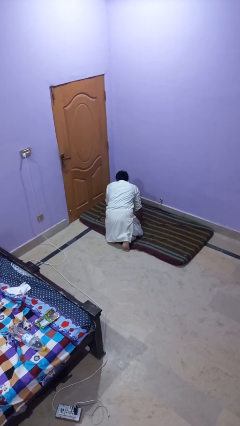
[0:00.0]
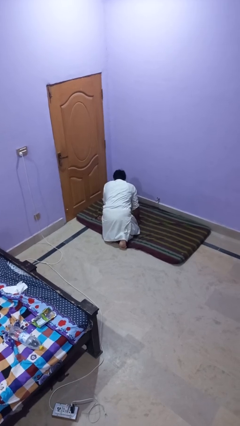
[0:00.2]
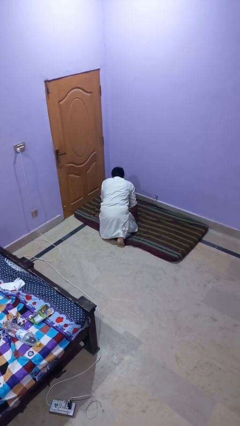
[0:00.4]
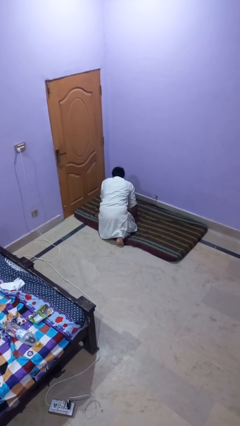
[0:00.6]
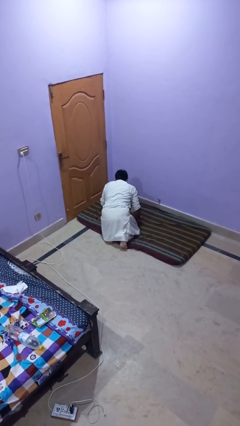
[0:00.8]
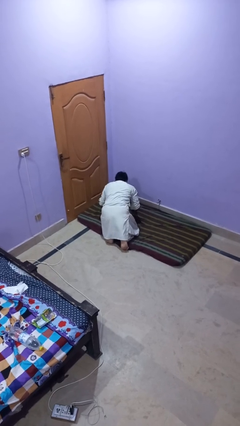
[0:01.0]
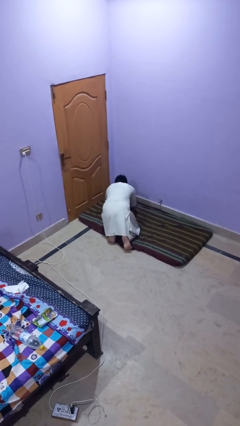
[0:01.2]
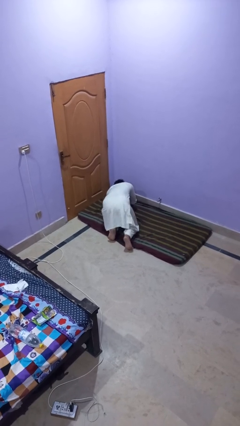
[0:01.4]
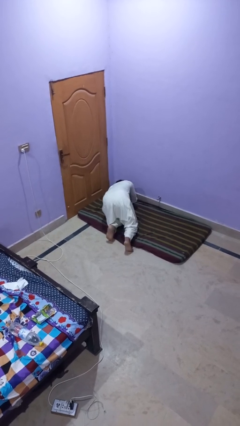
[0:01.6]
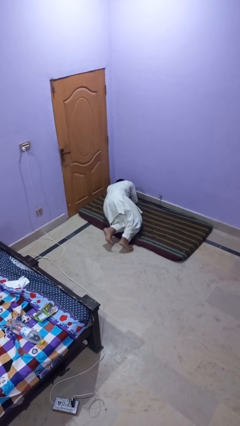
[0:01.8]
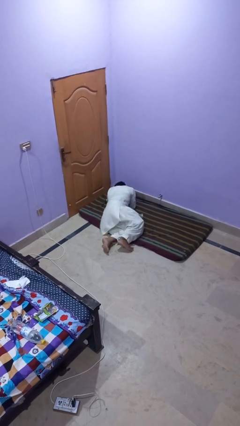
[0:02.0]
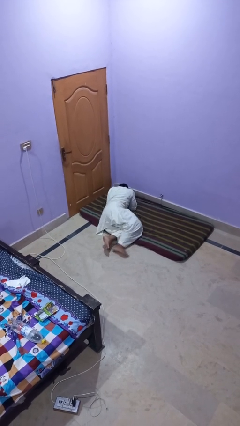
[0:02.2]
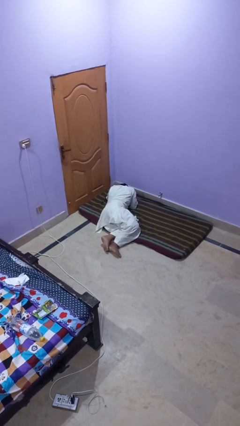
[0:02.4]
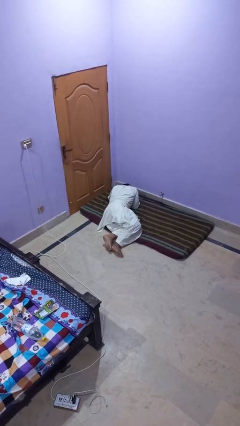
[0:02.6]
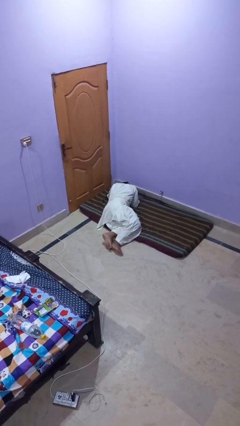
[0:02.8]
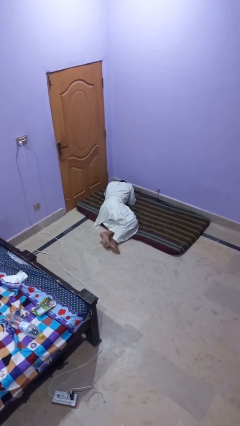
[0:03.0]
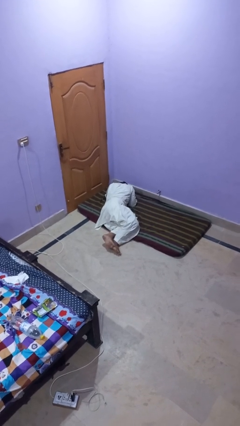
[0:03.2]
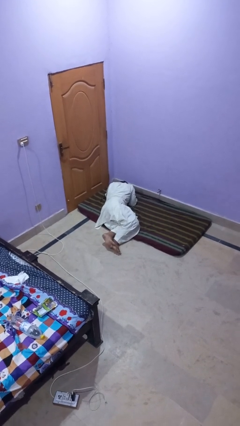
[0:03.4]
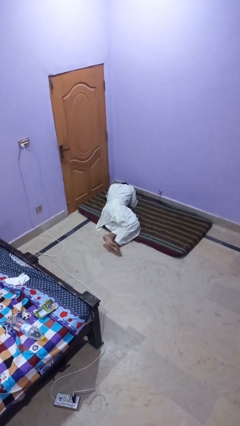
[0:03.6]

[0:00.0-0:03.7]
person lies down on floor

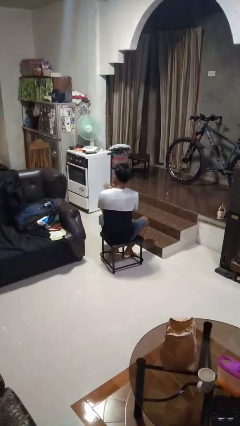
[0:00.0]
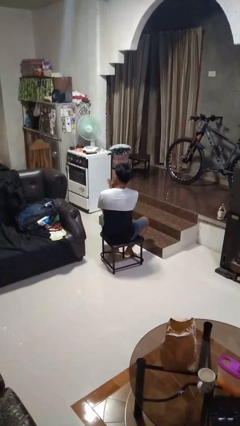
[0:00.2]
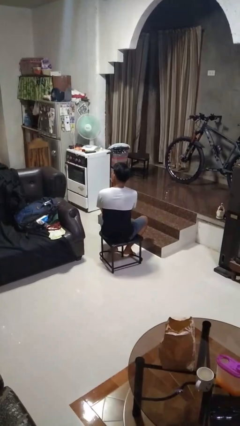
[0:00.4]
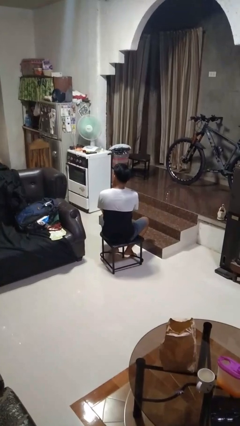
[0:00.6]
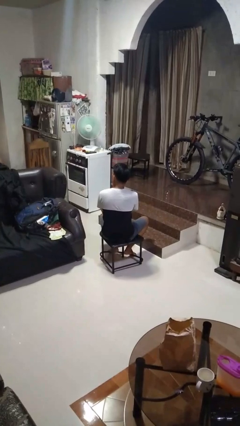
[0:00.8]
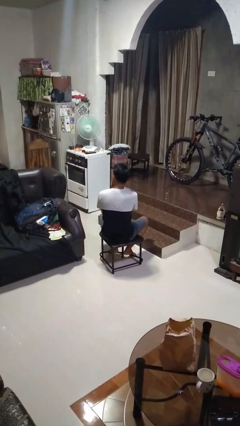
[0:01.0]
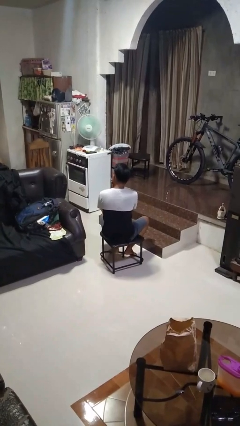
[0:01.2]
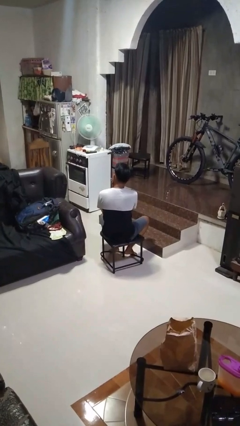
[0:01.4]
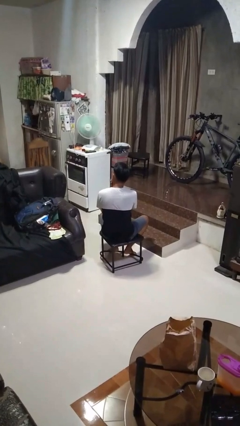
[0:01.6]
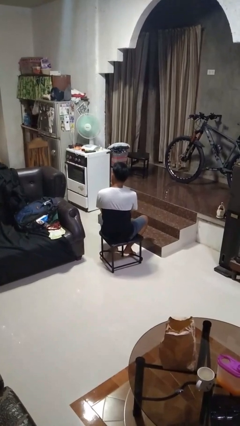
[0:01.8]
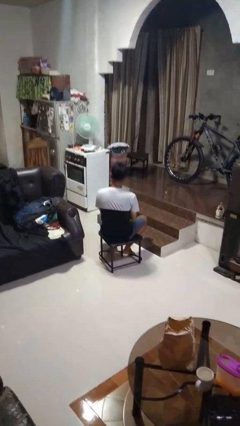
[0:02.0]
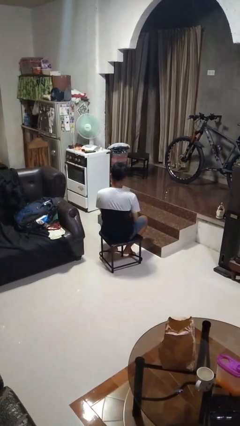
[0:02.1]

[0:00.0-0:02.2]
person strokes chin

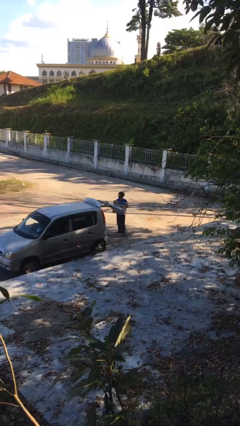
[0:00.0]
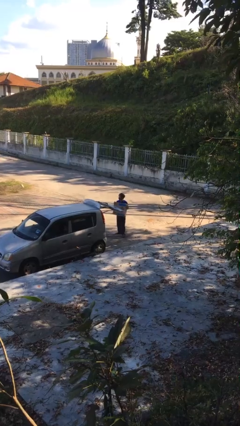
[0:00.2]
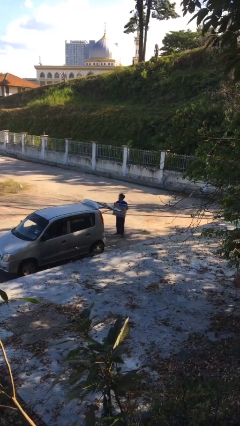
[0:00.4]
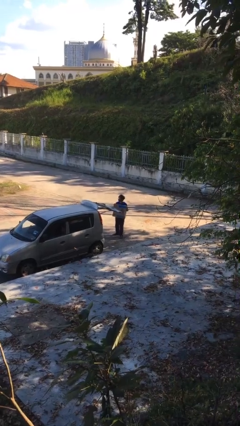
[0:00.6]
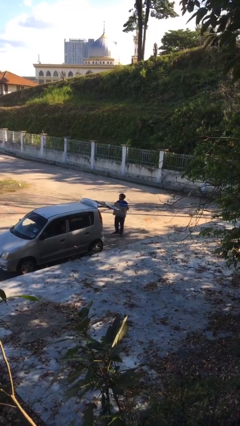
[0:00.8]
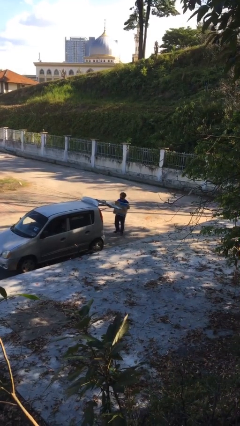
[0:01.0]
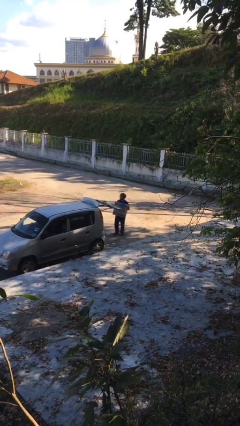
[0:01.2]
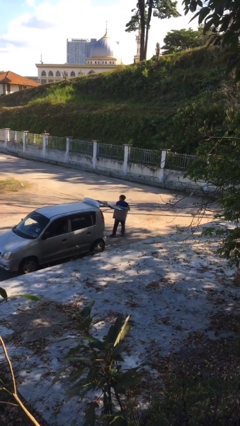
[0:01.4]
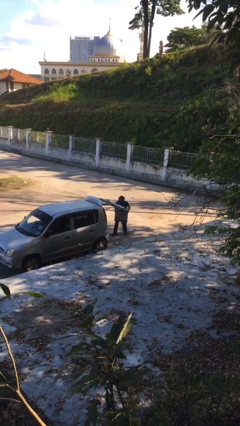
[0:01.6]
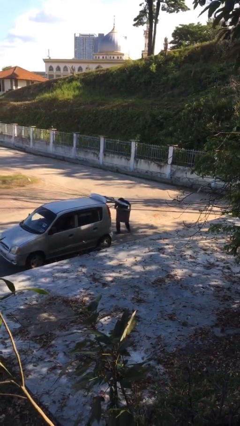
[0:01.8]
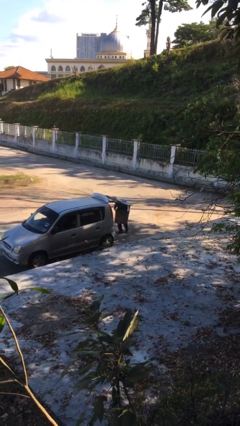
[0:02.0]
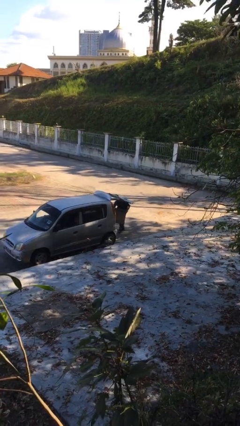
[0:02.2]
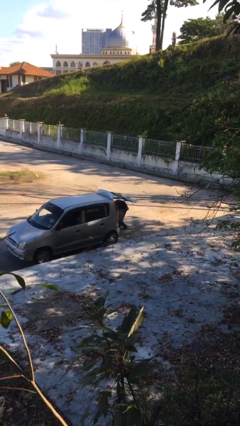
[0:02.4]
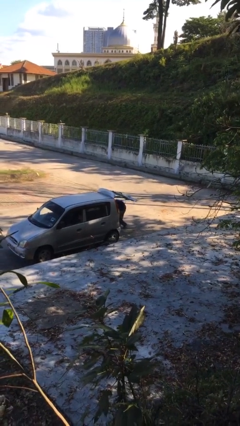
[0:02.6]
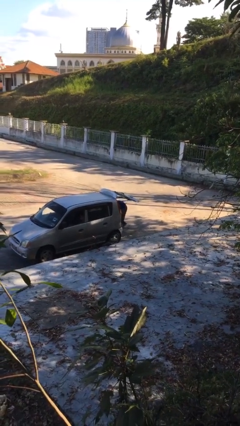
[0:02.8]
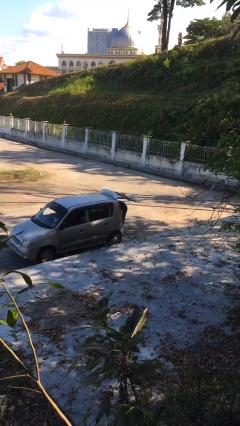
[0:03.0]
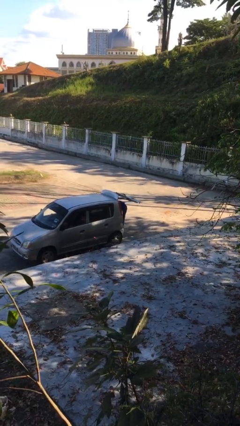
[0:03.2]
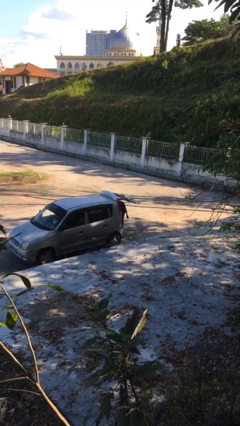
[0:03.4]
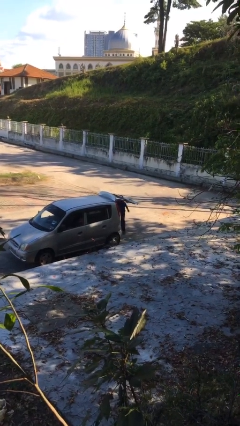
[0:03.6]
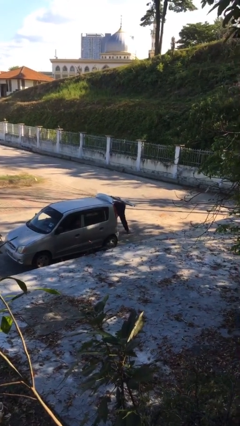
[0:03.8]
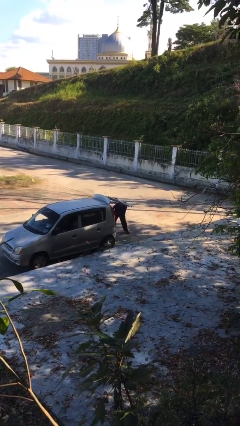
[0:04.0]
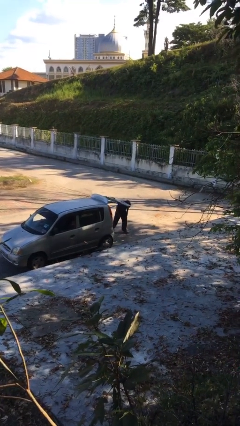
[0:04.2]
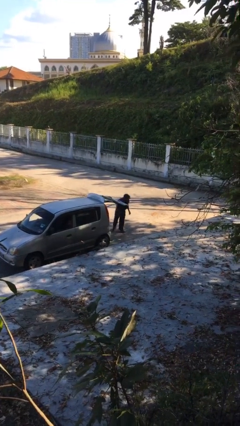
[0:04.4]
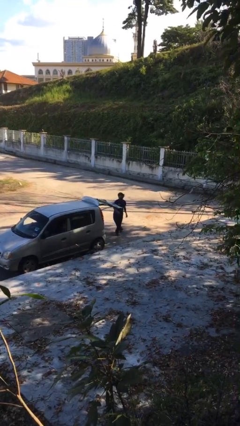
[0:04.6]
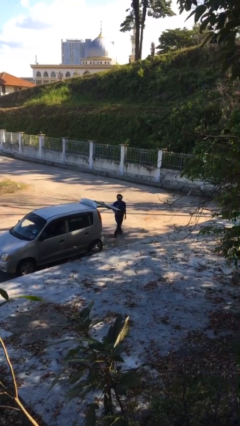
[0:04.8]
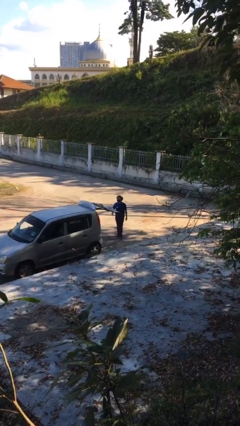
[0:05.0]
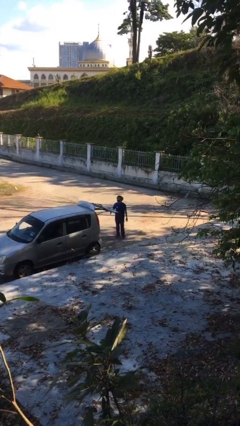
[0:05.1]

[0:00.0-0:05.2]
person loads car

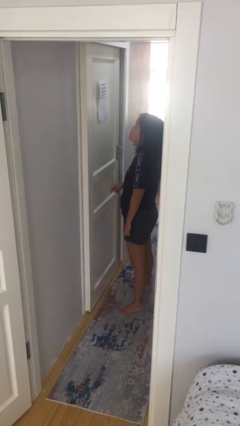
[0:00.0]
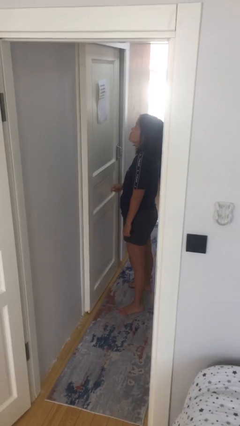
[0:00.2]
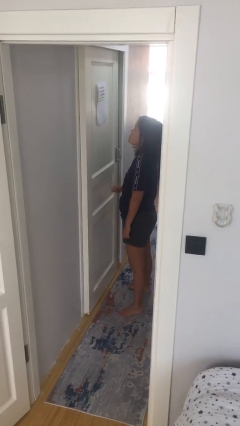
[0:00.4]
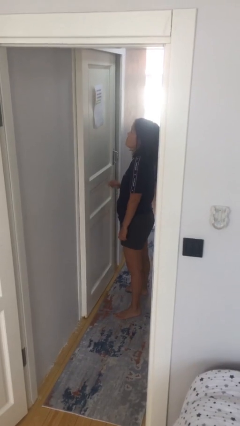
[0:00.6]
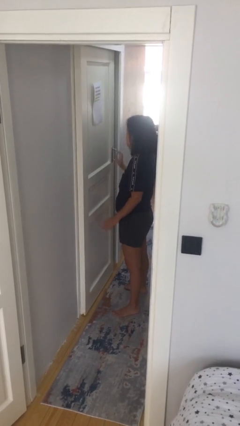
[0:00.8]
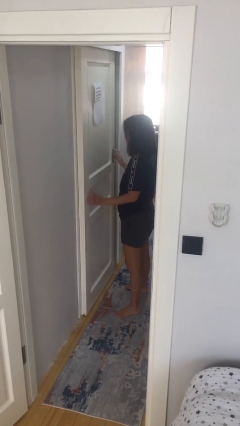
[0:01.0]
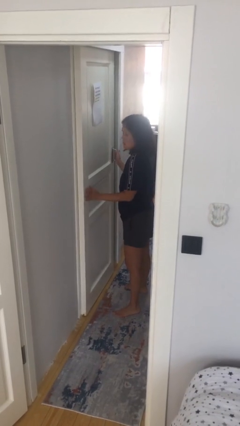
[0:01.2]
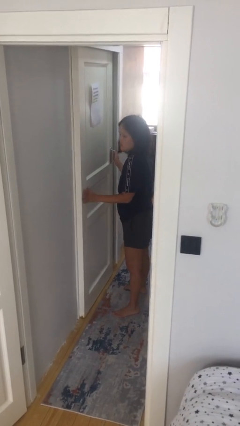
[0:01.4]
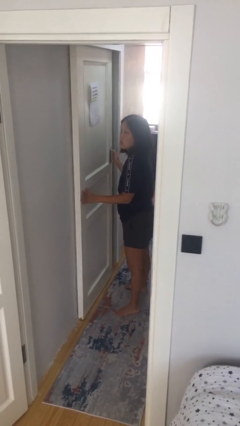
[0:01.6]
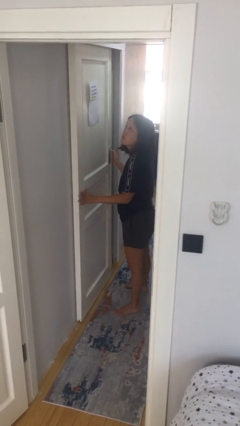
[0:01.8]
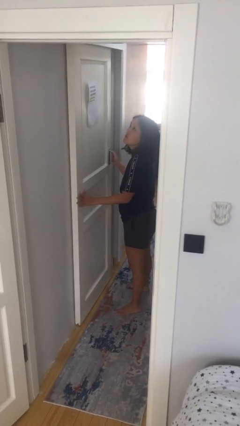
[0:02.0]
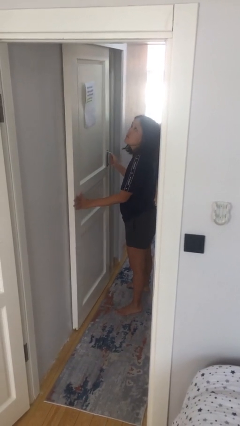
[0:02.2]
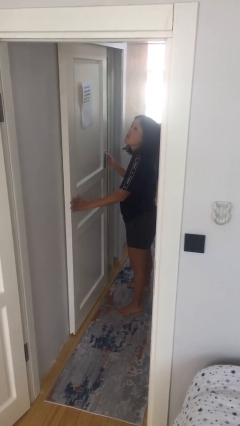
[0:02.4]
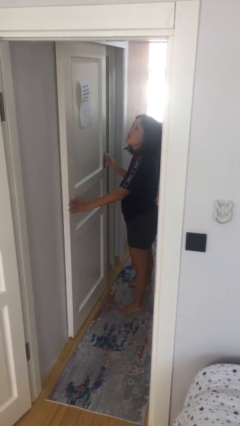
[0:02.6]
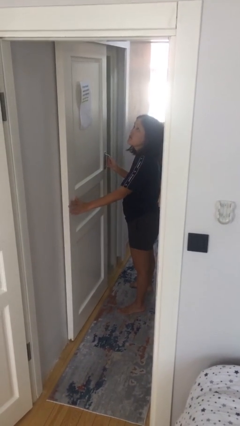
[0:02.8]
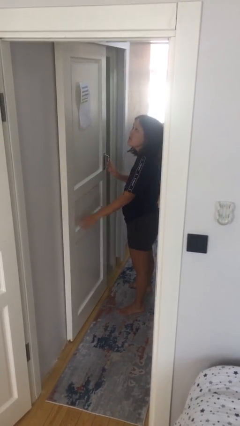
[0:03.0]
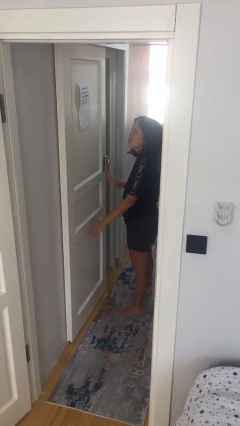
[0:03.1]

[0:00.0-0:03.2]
person opens sliding door

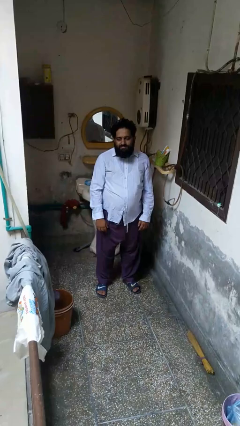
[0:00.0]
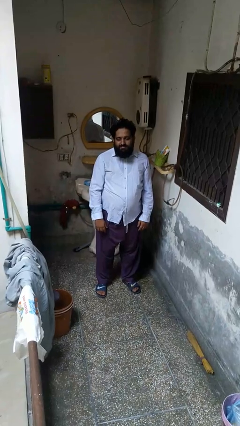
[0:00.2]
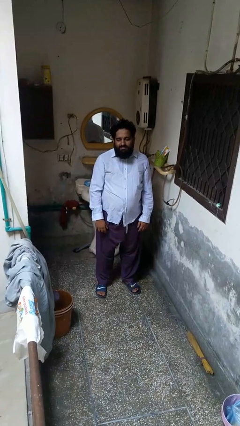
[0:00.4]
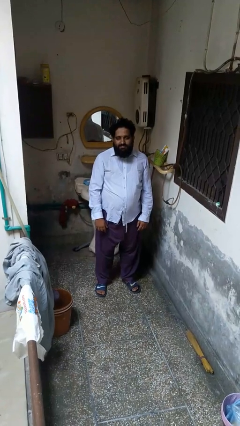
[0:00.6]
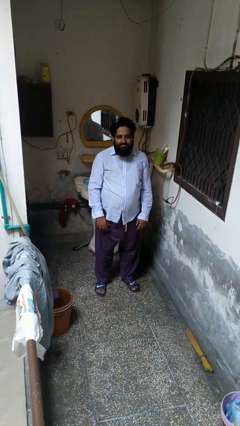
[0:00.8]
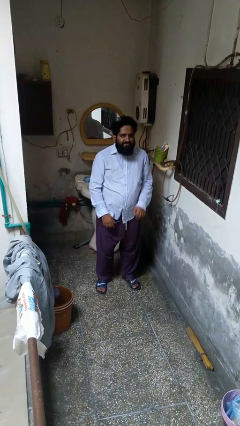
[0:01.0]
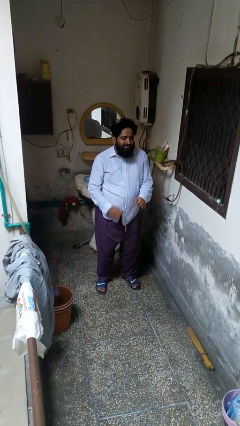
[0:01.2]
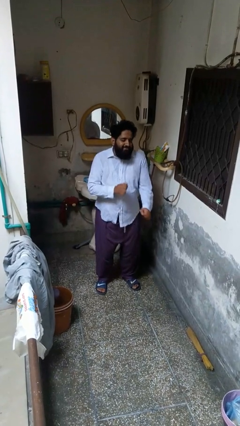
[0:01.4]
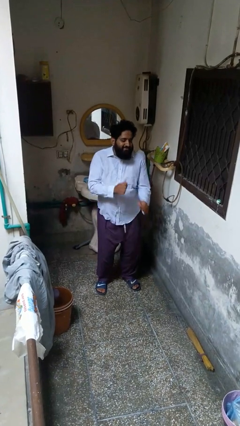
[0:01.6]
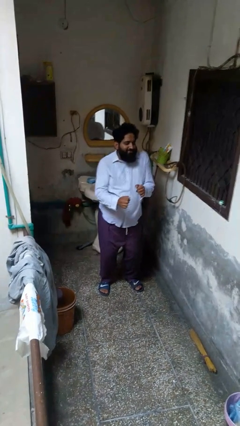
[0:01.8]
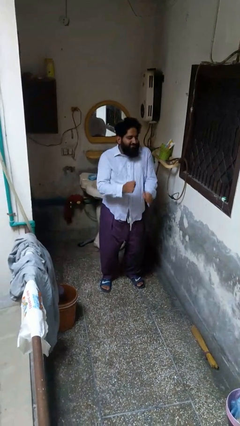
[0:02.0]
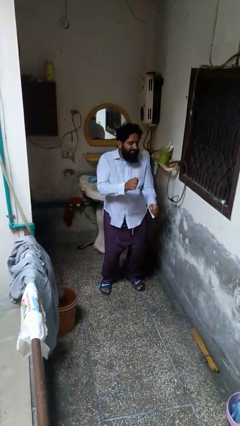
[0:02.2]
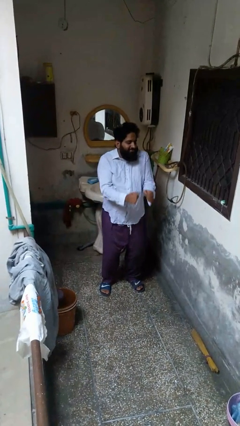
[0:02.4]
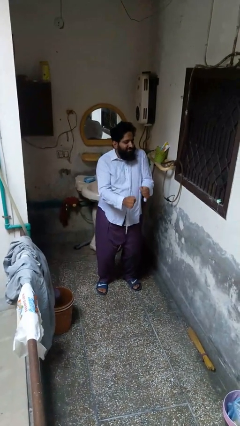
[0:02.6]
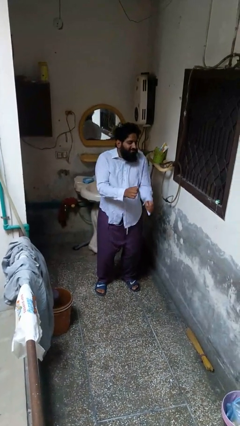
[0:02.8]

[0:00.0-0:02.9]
person dances in place

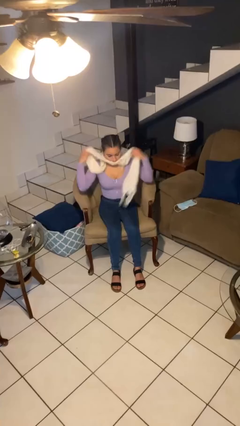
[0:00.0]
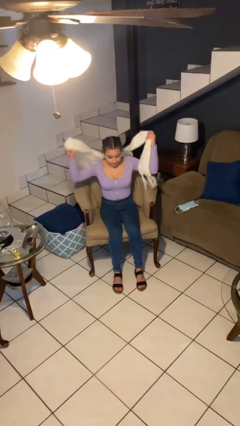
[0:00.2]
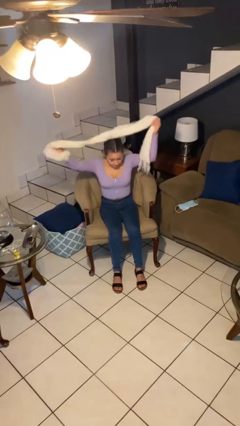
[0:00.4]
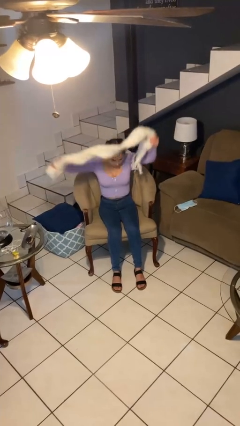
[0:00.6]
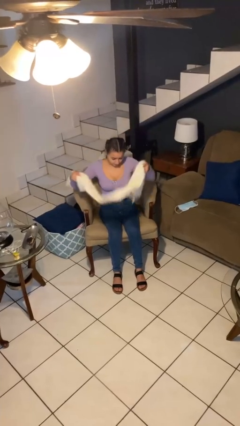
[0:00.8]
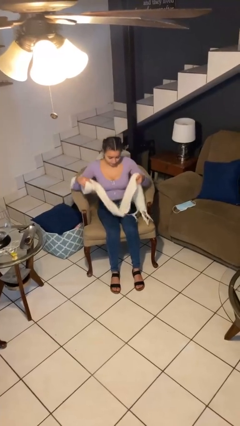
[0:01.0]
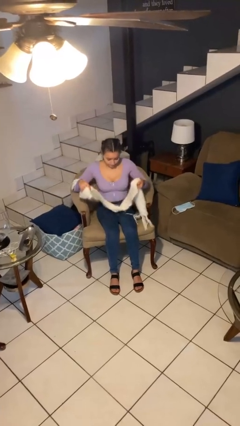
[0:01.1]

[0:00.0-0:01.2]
person takes off scarf
